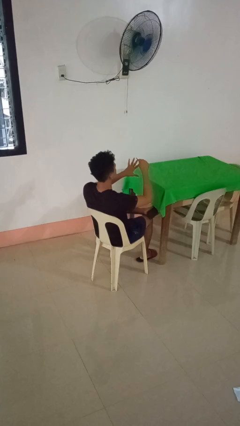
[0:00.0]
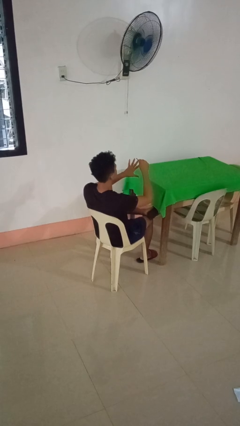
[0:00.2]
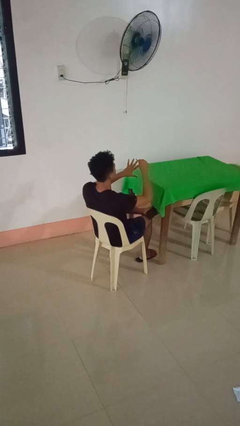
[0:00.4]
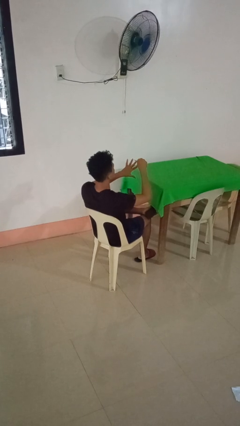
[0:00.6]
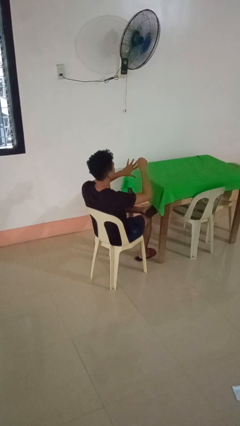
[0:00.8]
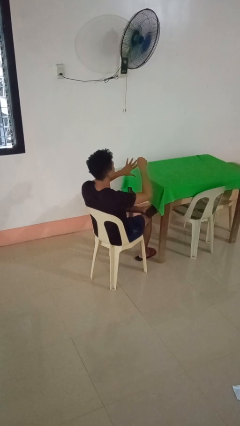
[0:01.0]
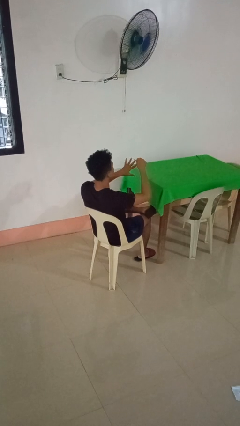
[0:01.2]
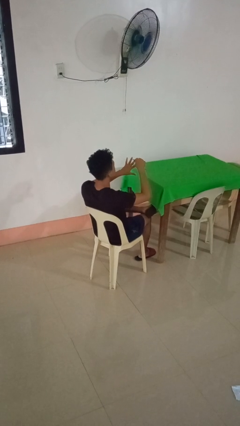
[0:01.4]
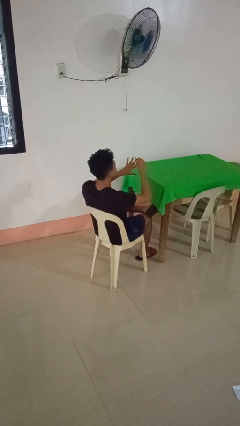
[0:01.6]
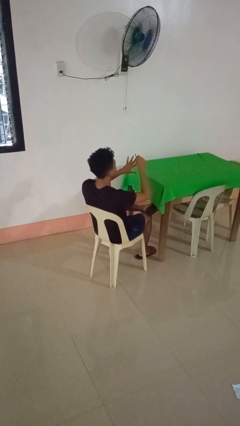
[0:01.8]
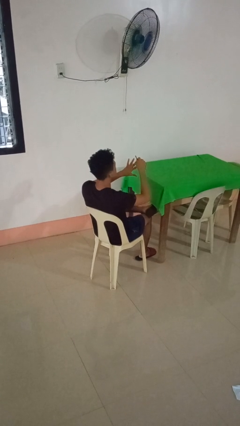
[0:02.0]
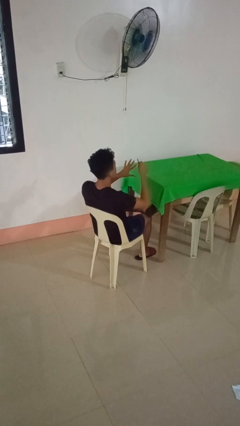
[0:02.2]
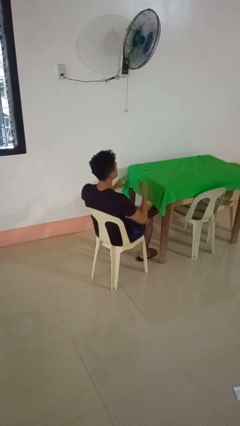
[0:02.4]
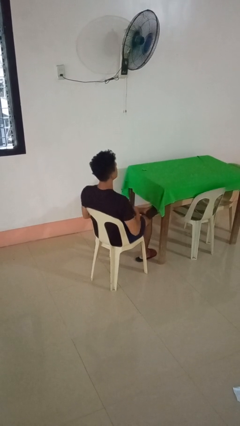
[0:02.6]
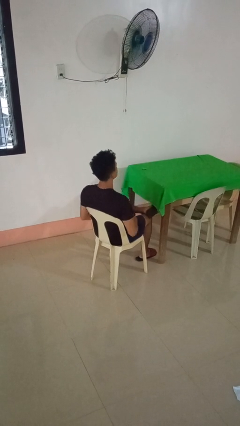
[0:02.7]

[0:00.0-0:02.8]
person files fingernails

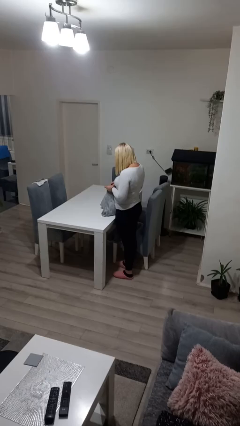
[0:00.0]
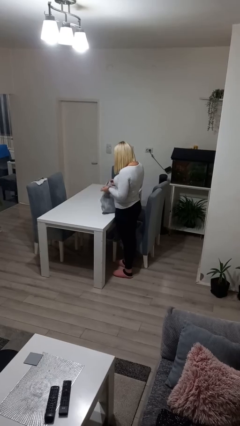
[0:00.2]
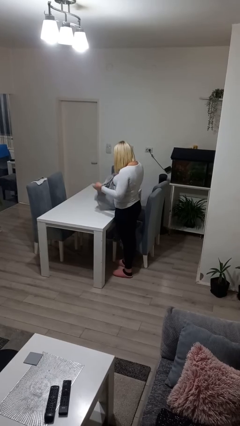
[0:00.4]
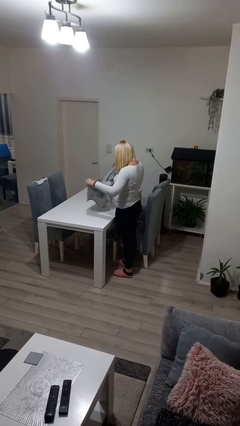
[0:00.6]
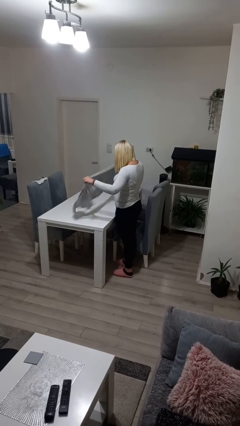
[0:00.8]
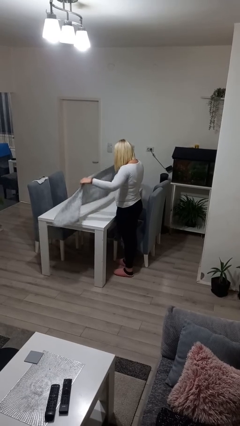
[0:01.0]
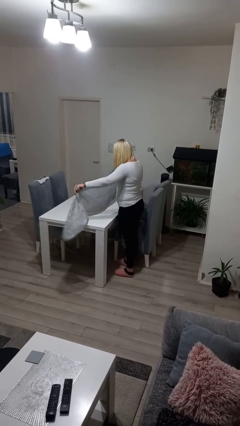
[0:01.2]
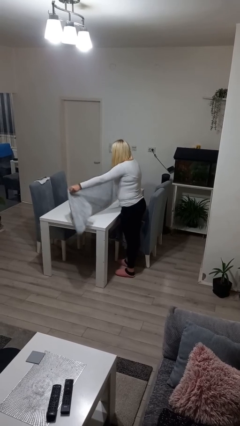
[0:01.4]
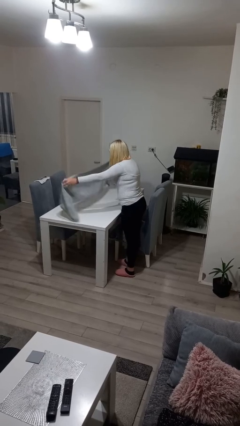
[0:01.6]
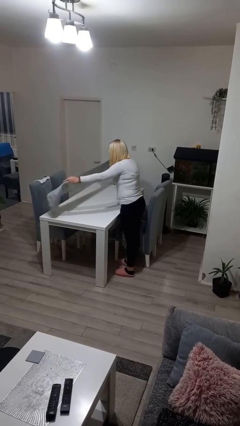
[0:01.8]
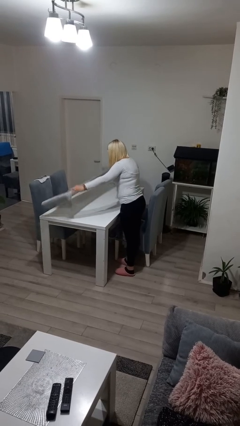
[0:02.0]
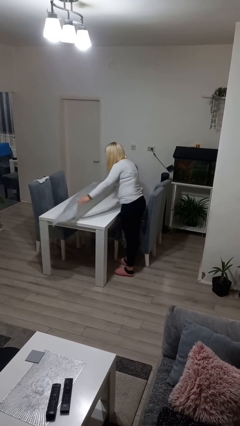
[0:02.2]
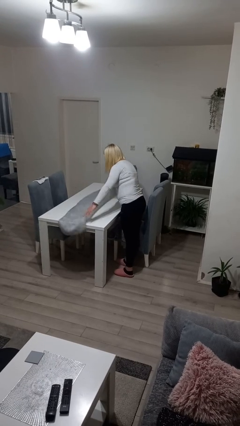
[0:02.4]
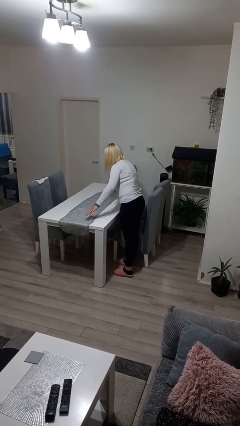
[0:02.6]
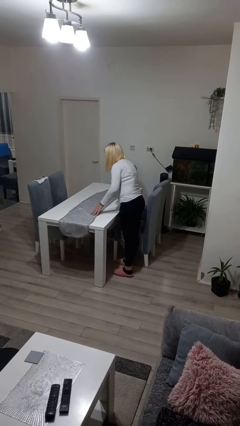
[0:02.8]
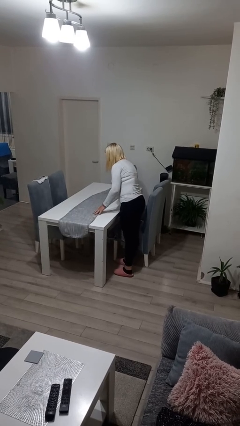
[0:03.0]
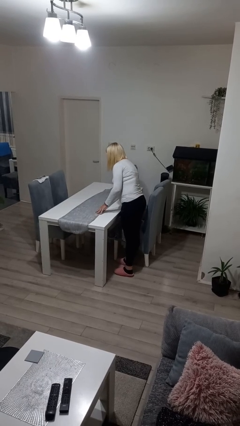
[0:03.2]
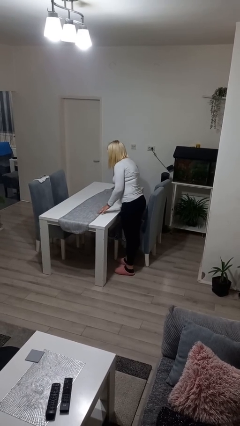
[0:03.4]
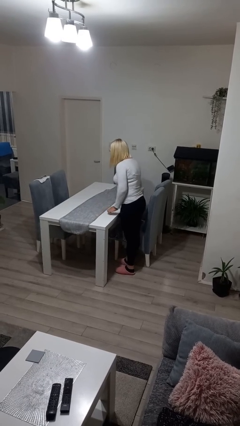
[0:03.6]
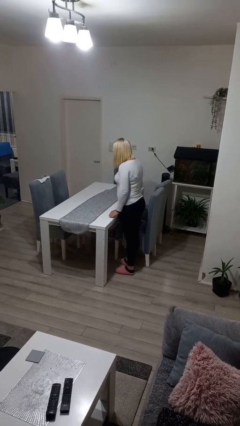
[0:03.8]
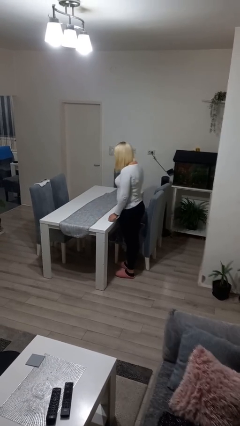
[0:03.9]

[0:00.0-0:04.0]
person spreads tablecloth

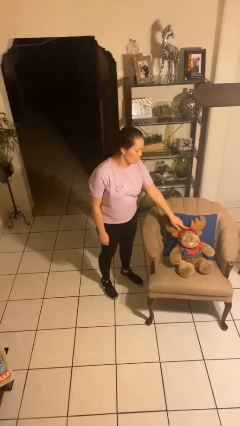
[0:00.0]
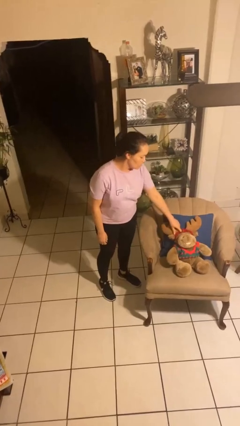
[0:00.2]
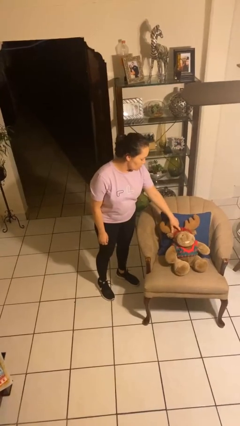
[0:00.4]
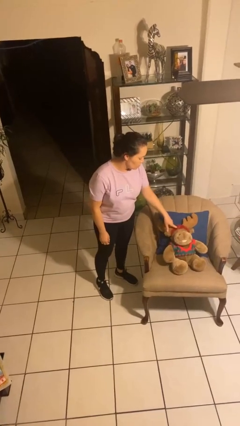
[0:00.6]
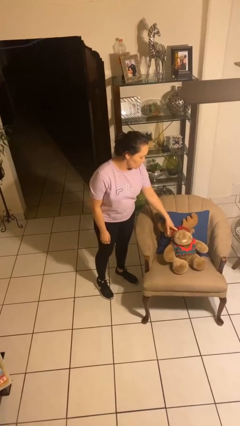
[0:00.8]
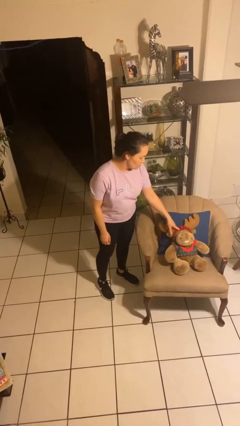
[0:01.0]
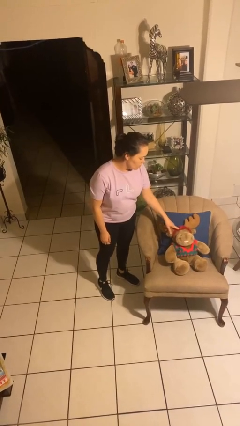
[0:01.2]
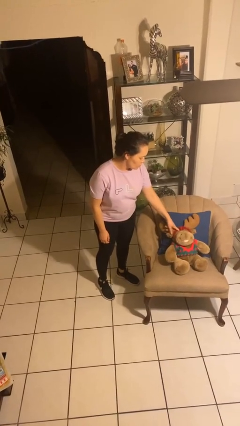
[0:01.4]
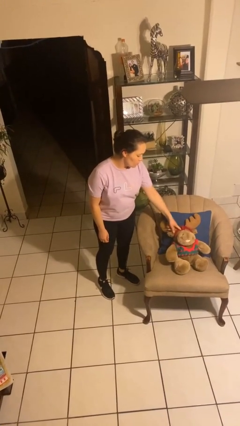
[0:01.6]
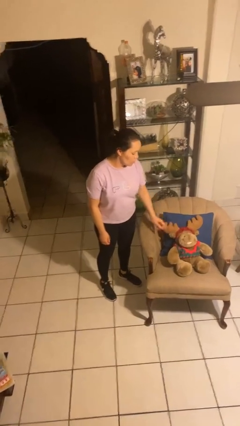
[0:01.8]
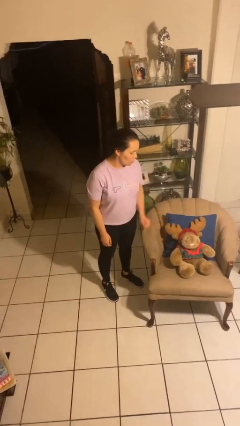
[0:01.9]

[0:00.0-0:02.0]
person taps object with finger

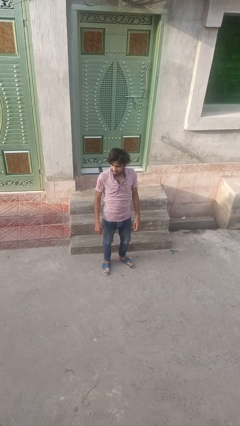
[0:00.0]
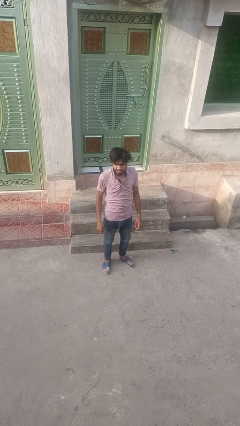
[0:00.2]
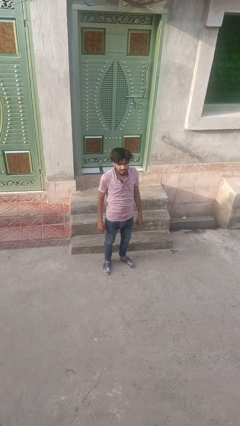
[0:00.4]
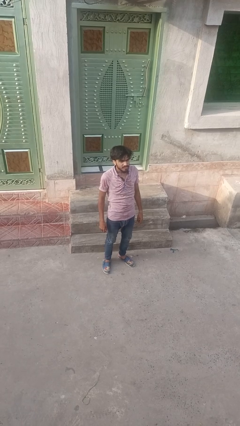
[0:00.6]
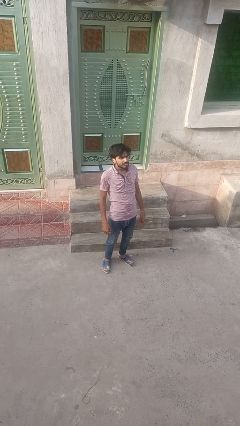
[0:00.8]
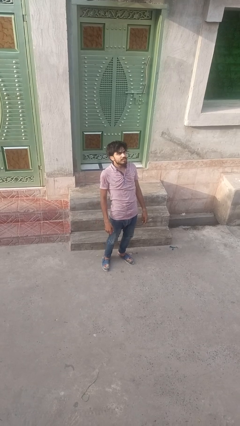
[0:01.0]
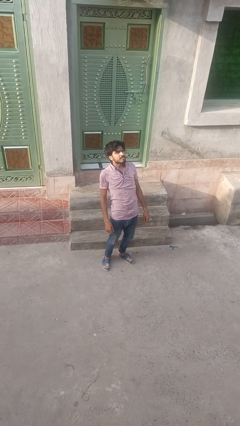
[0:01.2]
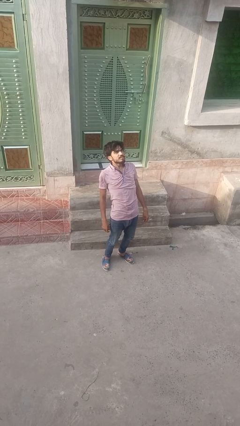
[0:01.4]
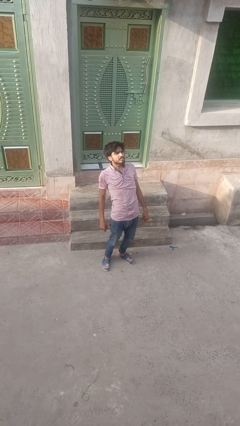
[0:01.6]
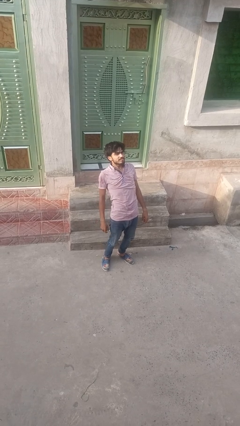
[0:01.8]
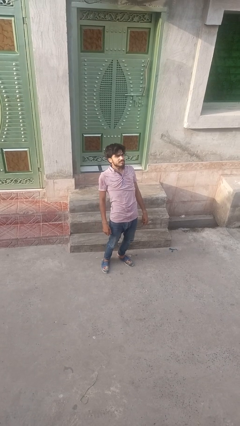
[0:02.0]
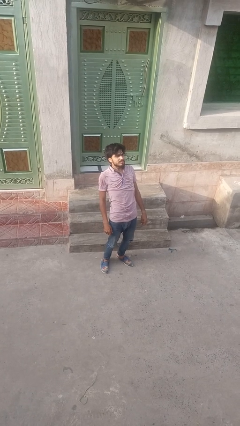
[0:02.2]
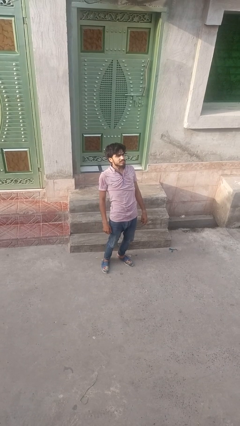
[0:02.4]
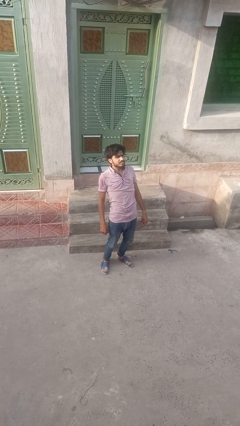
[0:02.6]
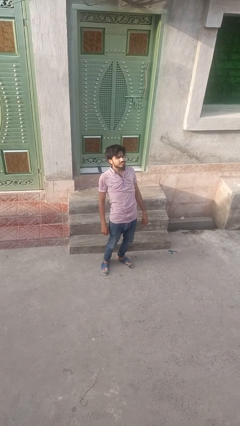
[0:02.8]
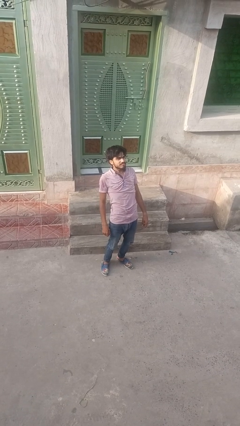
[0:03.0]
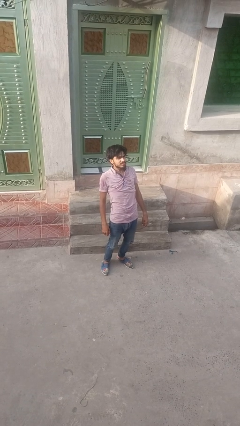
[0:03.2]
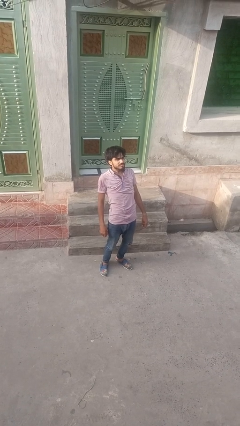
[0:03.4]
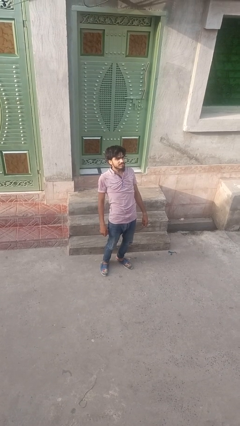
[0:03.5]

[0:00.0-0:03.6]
person stretches back

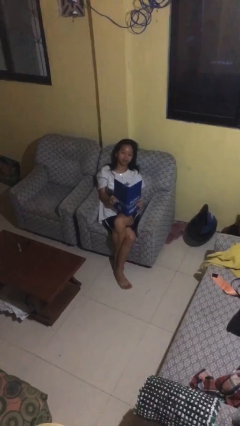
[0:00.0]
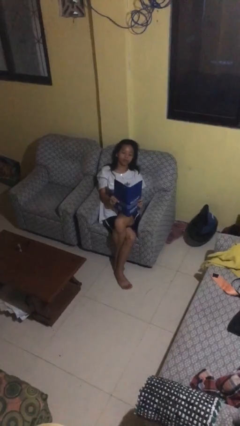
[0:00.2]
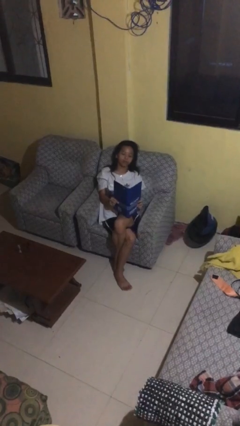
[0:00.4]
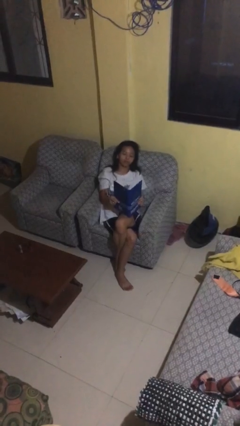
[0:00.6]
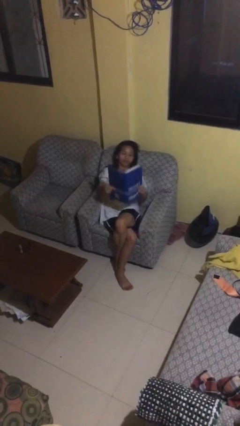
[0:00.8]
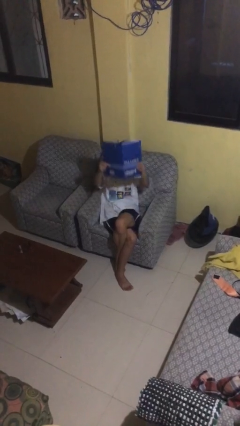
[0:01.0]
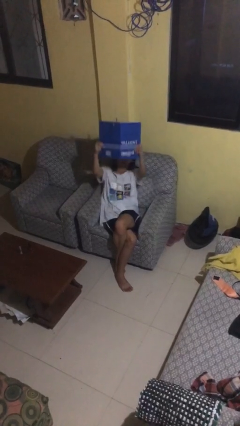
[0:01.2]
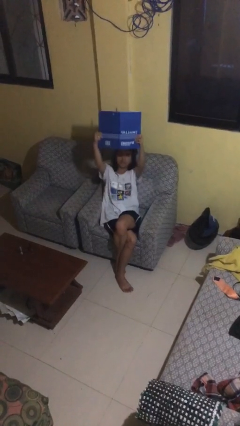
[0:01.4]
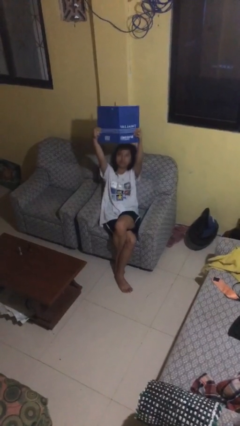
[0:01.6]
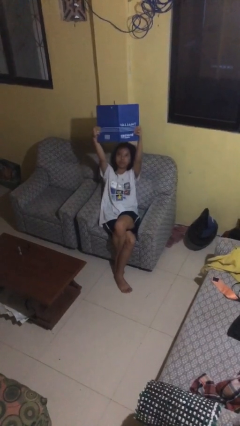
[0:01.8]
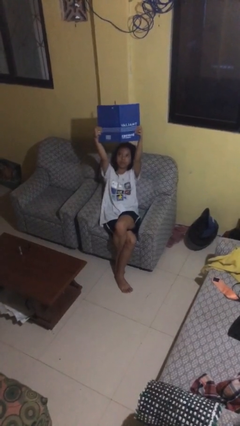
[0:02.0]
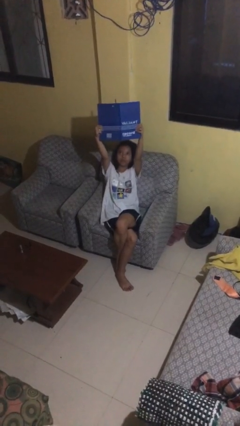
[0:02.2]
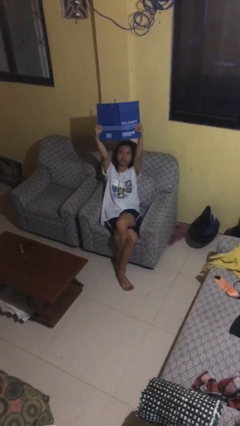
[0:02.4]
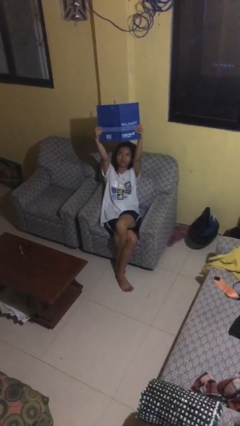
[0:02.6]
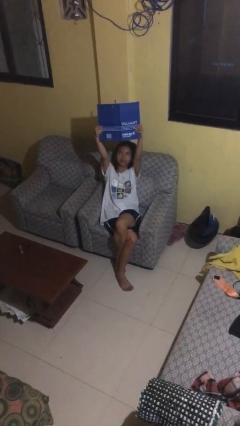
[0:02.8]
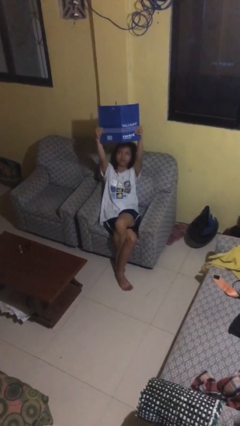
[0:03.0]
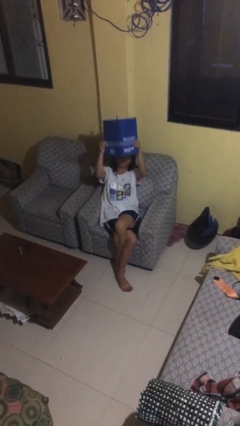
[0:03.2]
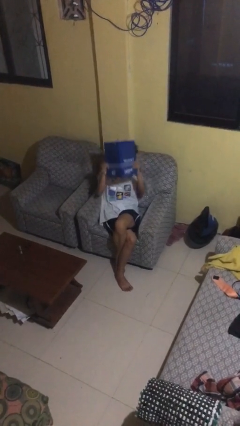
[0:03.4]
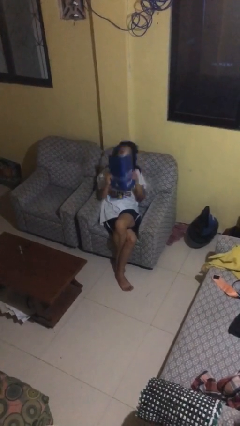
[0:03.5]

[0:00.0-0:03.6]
person holds object above head

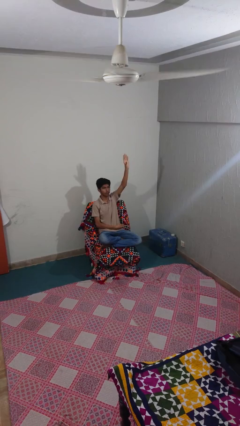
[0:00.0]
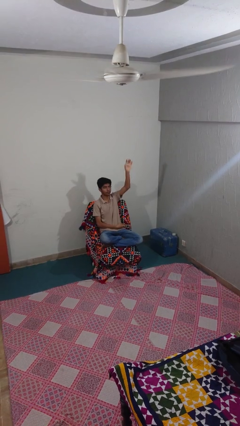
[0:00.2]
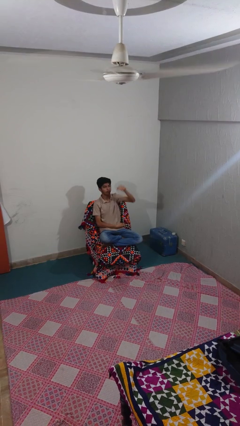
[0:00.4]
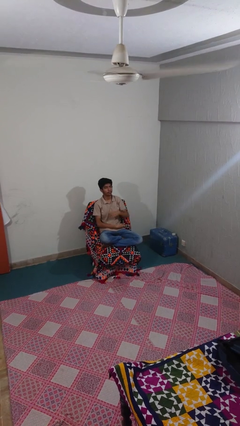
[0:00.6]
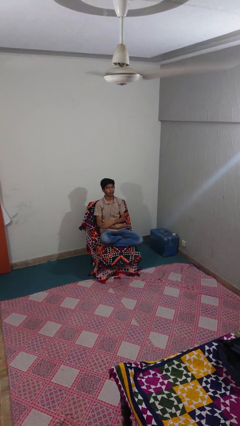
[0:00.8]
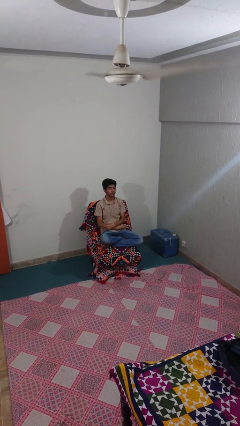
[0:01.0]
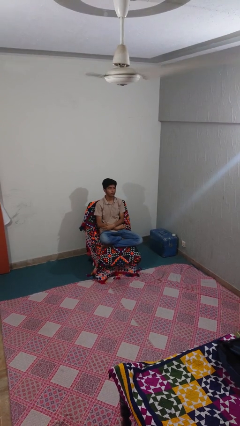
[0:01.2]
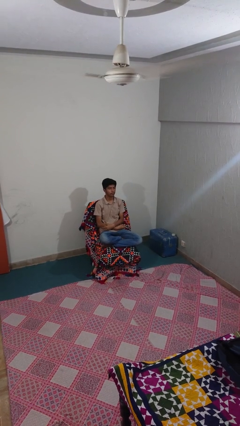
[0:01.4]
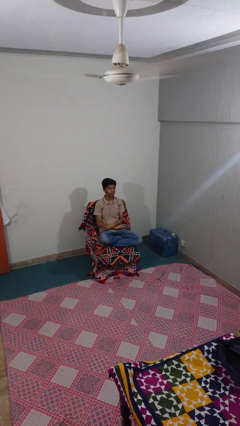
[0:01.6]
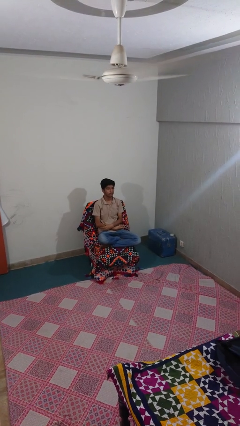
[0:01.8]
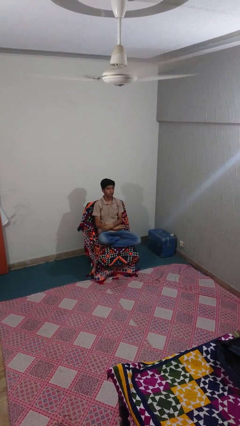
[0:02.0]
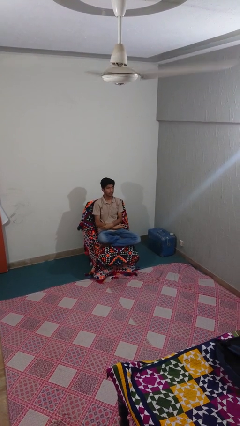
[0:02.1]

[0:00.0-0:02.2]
person gestures lower hand
